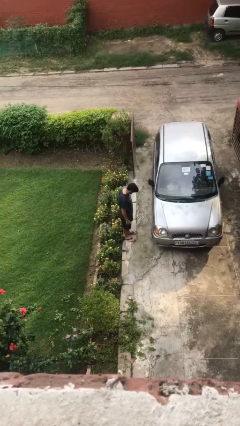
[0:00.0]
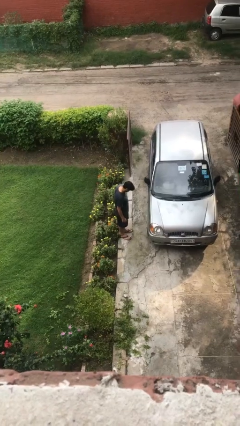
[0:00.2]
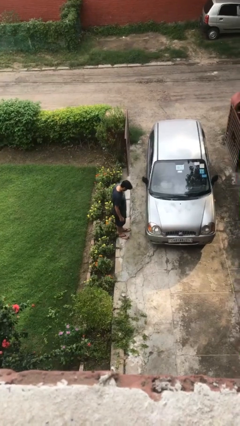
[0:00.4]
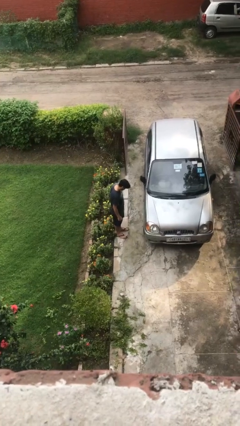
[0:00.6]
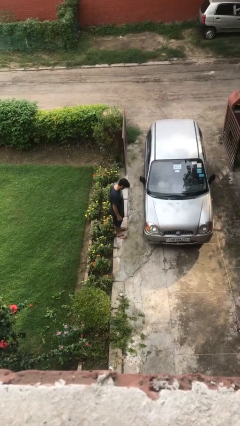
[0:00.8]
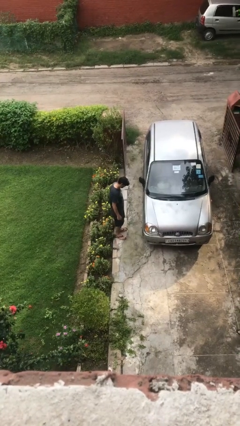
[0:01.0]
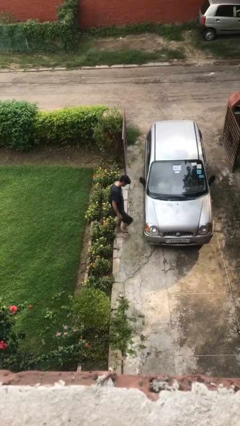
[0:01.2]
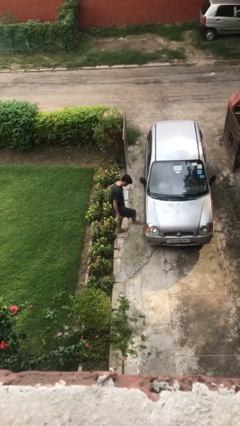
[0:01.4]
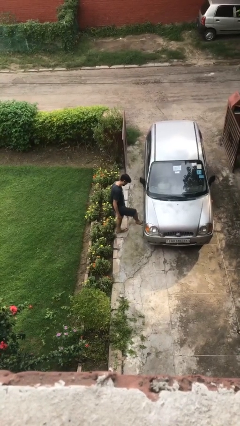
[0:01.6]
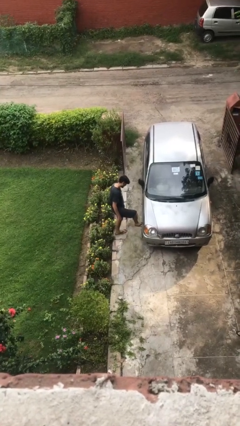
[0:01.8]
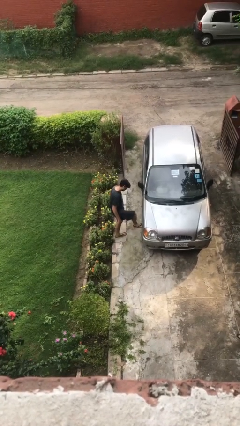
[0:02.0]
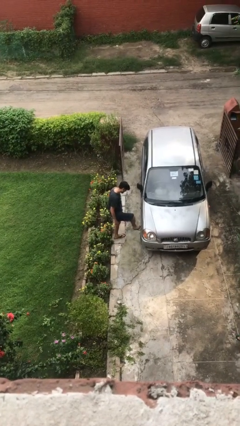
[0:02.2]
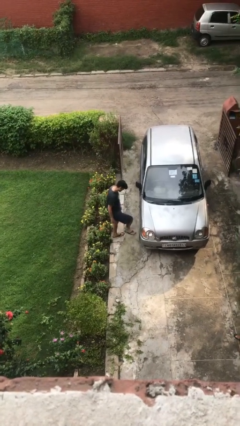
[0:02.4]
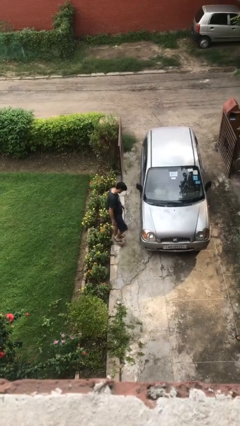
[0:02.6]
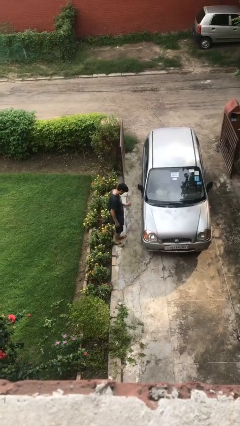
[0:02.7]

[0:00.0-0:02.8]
person kicks car tires

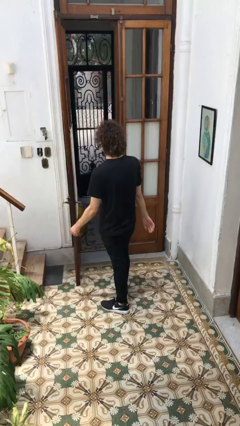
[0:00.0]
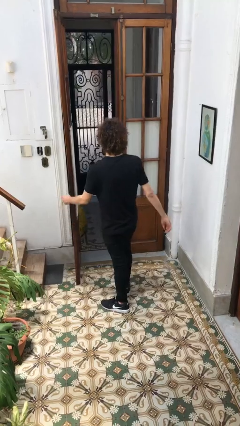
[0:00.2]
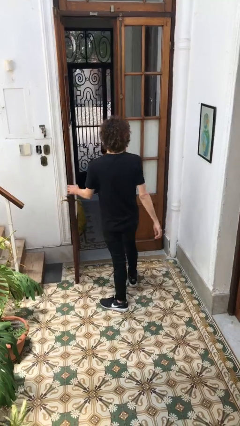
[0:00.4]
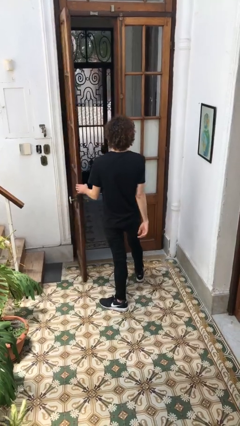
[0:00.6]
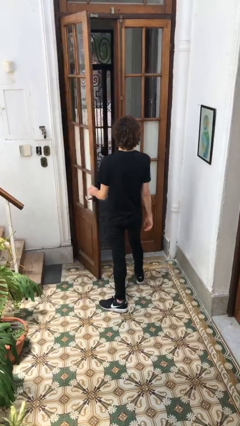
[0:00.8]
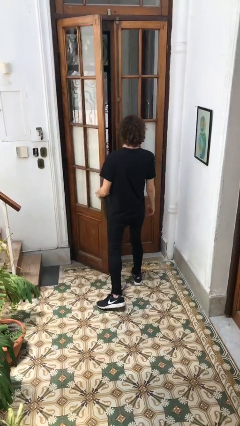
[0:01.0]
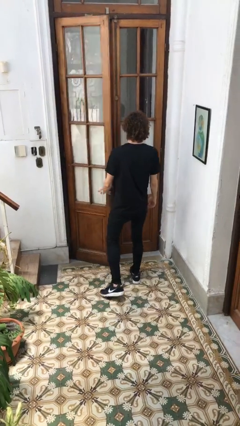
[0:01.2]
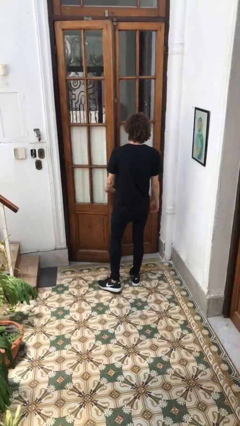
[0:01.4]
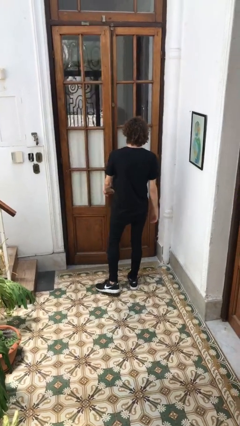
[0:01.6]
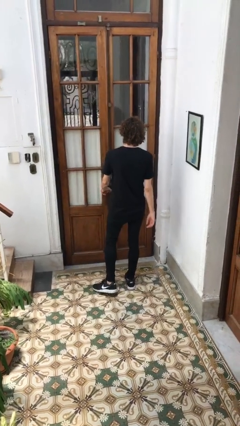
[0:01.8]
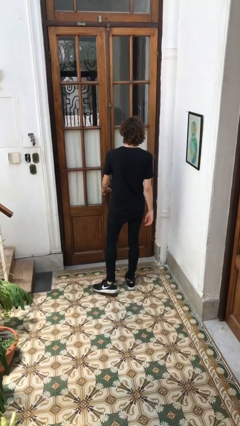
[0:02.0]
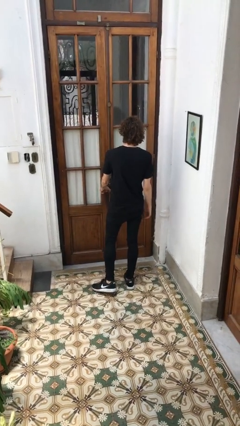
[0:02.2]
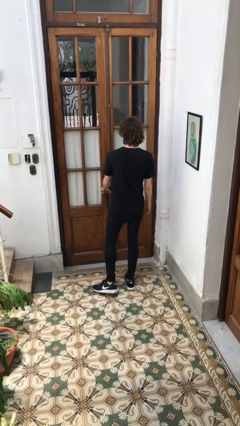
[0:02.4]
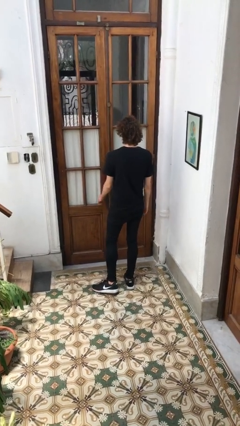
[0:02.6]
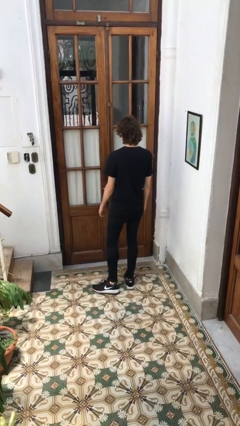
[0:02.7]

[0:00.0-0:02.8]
person closes facility door

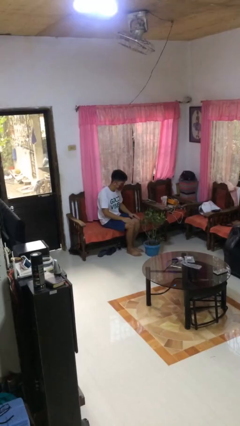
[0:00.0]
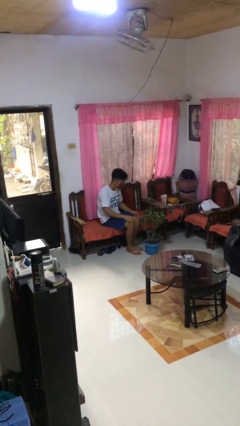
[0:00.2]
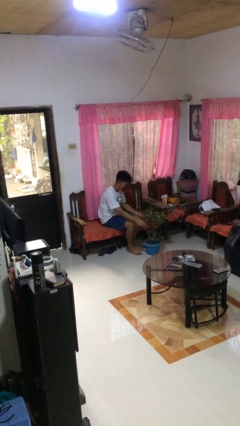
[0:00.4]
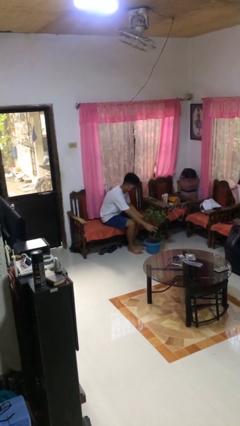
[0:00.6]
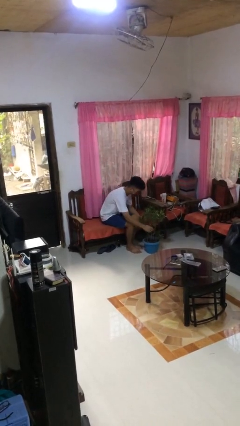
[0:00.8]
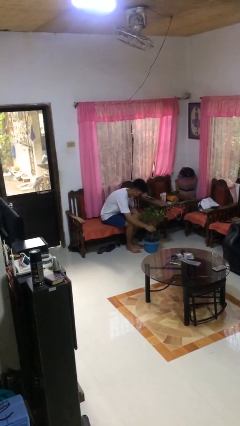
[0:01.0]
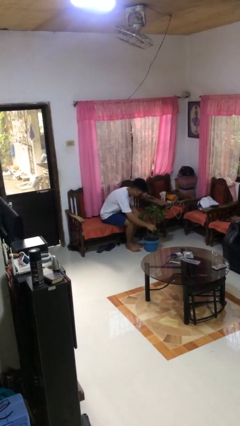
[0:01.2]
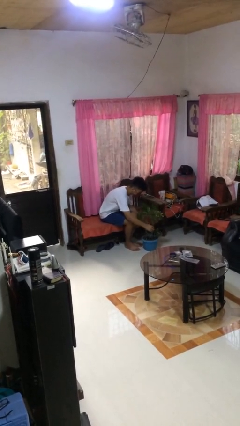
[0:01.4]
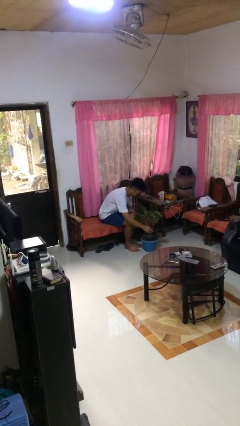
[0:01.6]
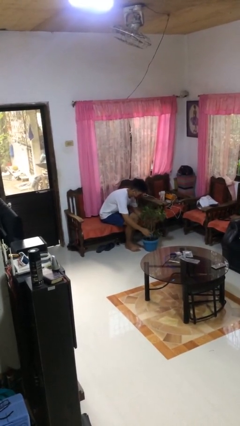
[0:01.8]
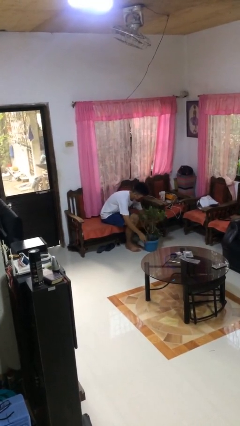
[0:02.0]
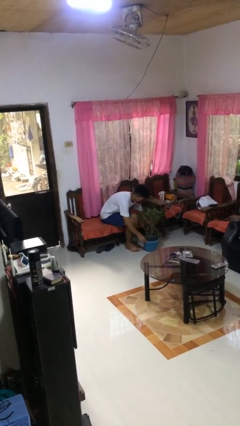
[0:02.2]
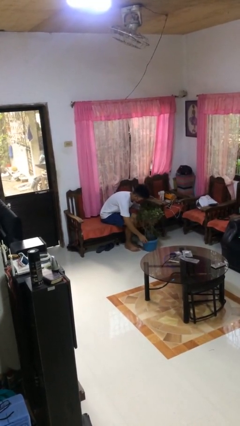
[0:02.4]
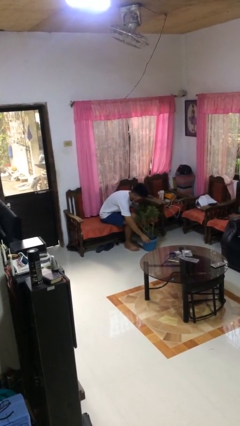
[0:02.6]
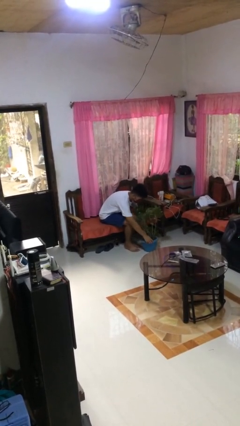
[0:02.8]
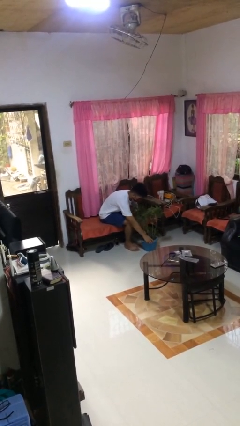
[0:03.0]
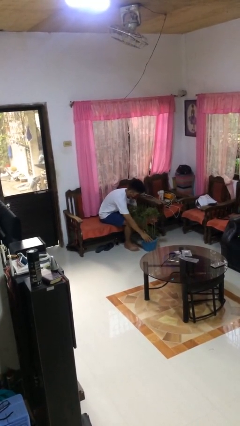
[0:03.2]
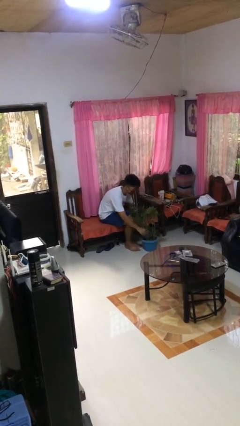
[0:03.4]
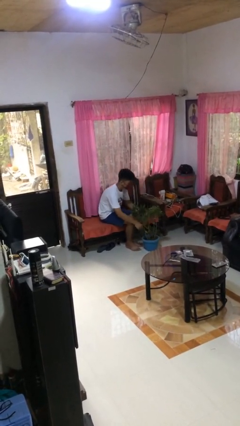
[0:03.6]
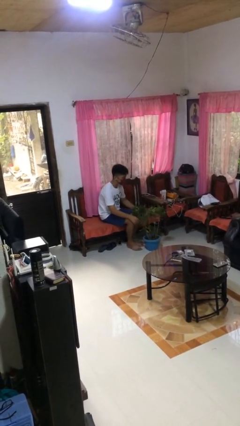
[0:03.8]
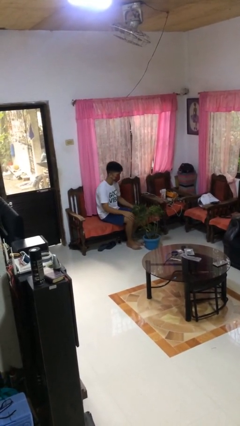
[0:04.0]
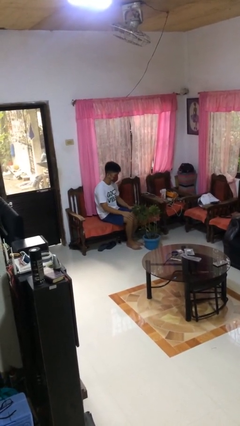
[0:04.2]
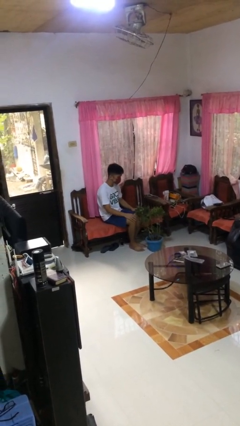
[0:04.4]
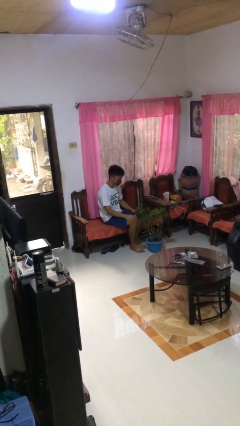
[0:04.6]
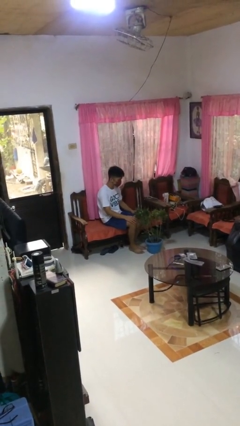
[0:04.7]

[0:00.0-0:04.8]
person arranges flowers in vase

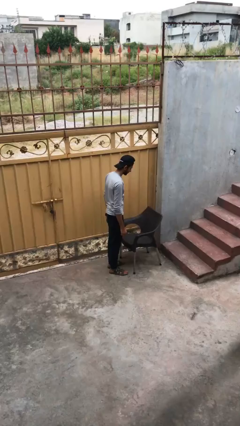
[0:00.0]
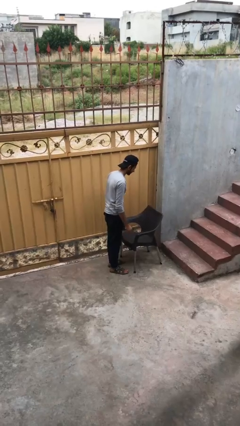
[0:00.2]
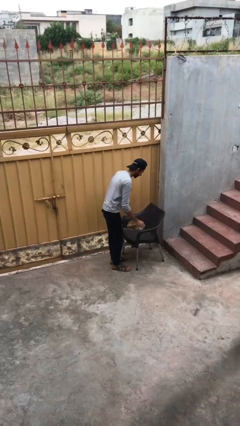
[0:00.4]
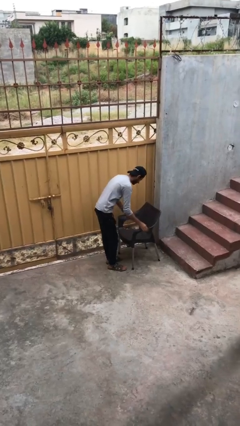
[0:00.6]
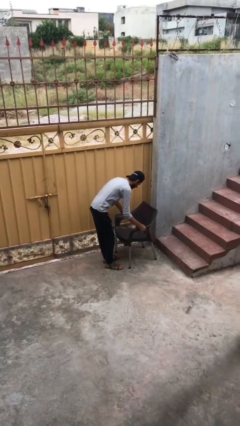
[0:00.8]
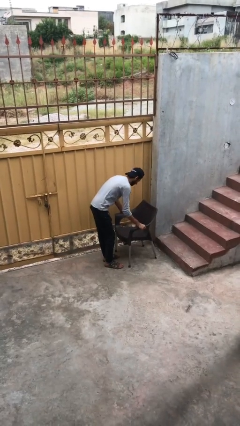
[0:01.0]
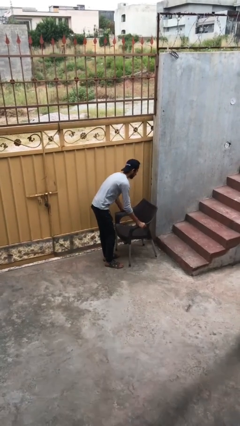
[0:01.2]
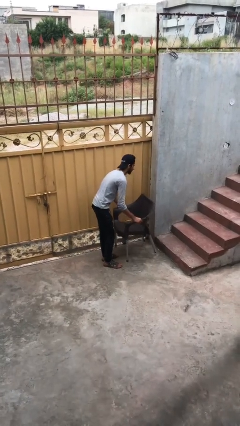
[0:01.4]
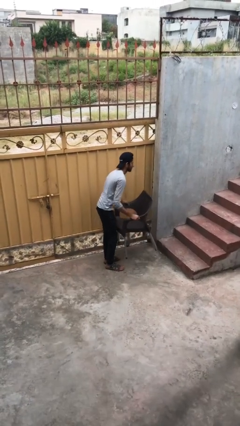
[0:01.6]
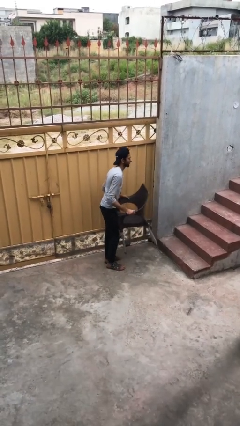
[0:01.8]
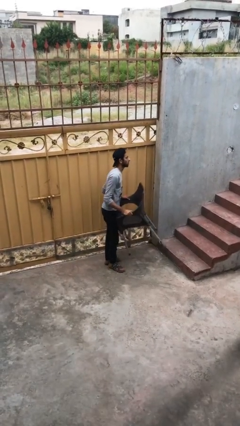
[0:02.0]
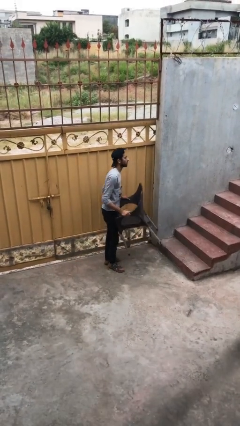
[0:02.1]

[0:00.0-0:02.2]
person picks up object from floor

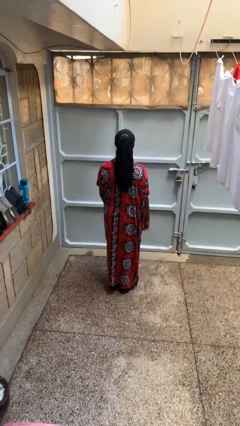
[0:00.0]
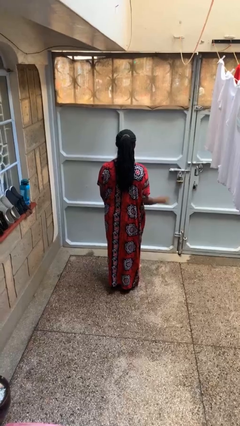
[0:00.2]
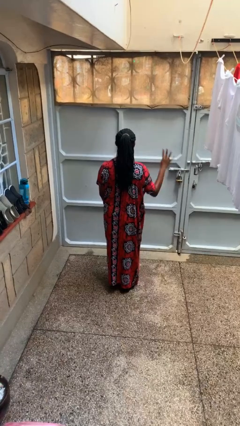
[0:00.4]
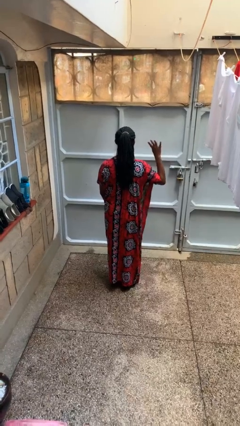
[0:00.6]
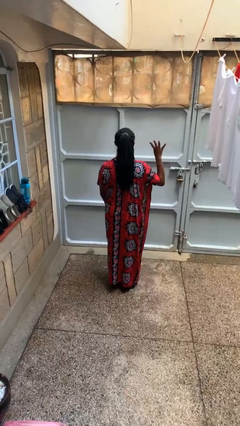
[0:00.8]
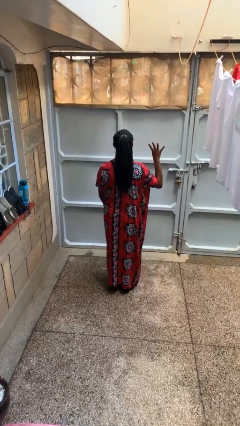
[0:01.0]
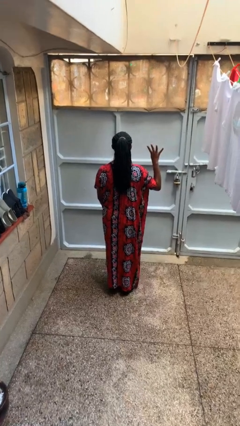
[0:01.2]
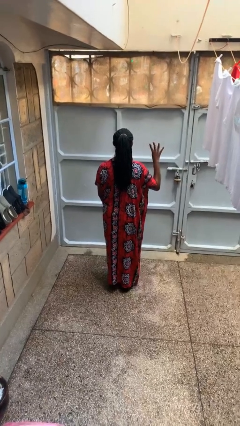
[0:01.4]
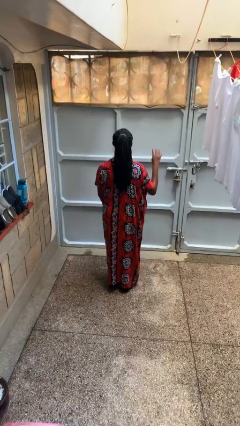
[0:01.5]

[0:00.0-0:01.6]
person gestures number four

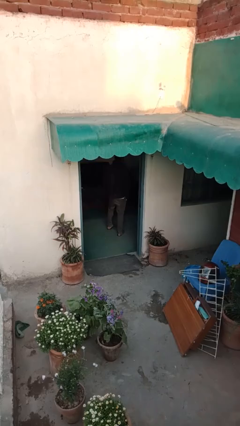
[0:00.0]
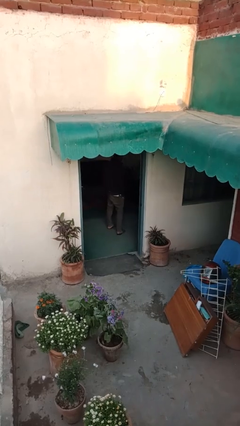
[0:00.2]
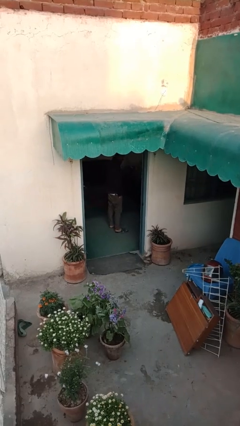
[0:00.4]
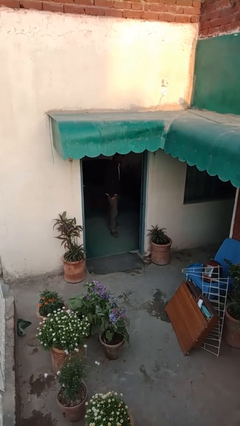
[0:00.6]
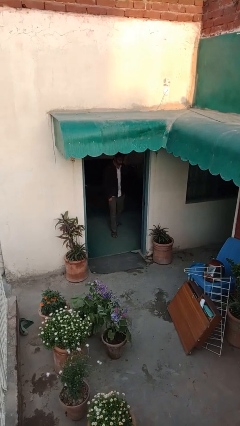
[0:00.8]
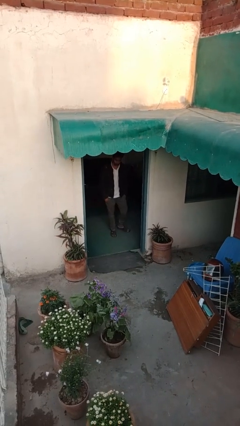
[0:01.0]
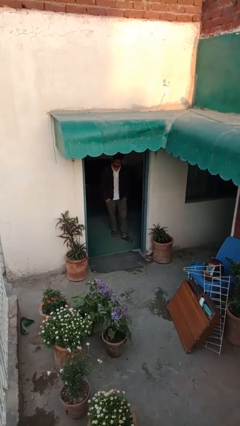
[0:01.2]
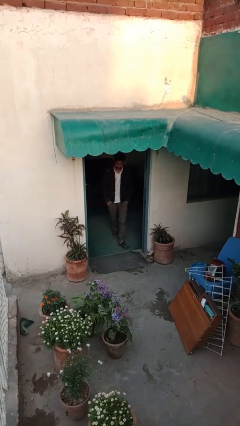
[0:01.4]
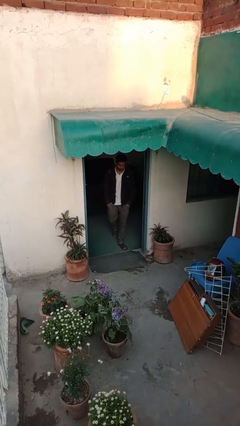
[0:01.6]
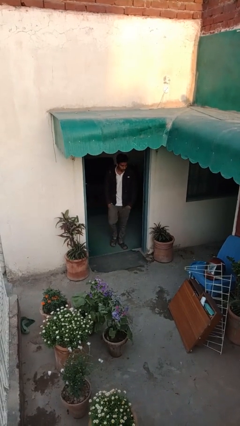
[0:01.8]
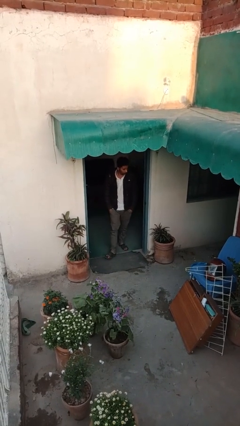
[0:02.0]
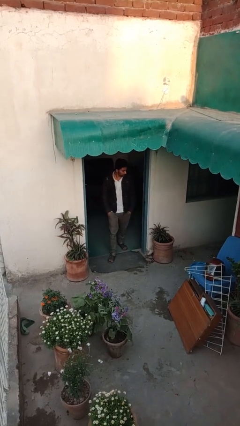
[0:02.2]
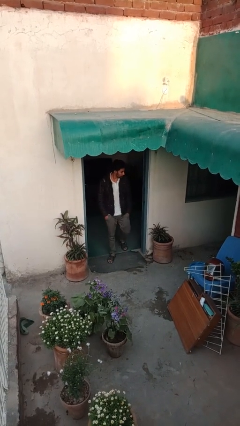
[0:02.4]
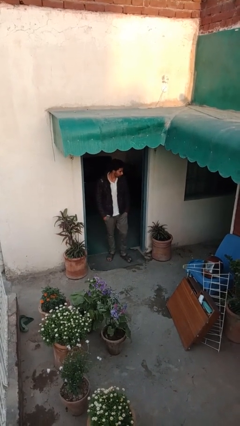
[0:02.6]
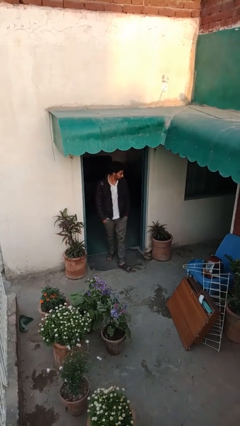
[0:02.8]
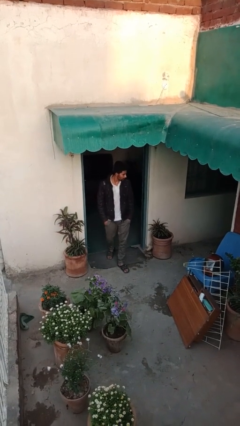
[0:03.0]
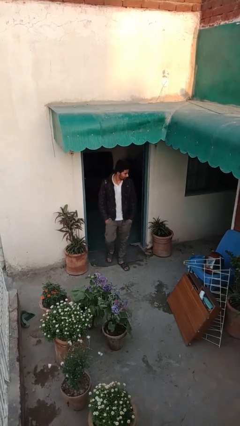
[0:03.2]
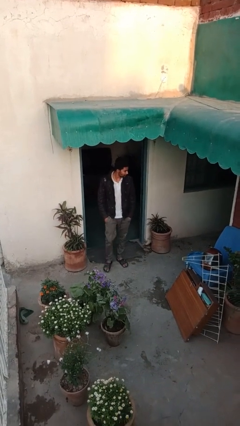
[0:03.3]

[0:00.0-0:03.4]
person enters scene through structure
